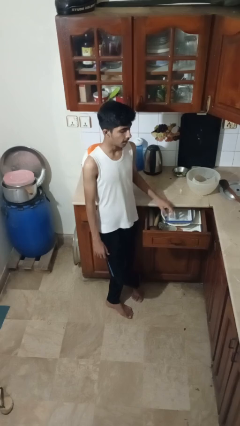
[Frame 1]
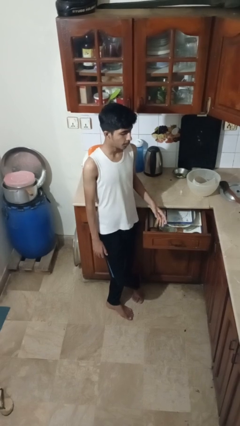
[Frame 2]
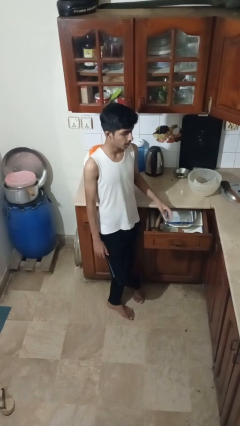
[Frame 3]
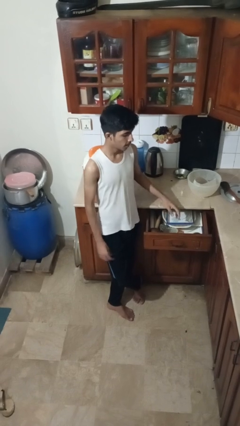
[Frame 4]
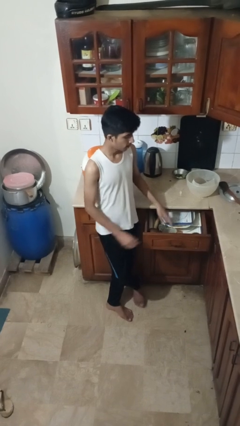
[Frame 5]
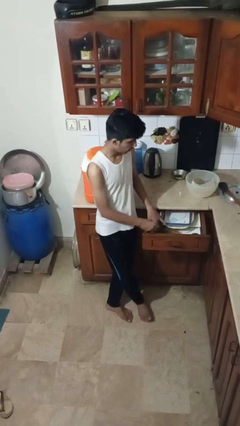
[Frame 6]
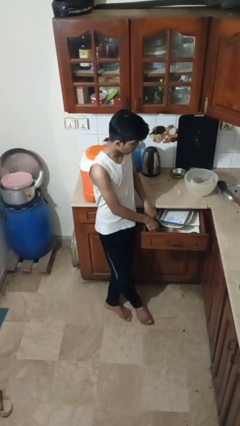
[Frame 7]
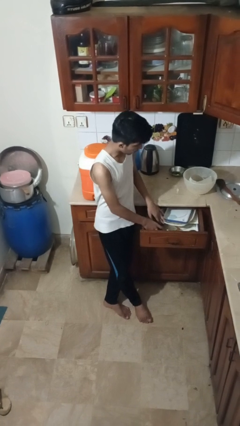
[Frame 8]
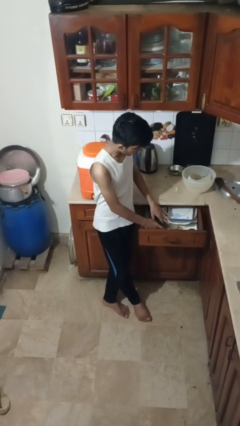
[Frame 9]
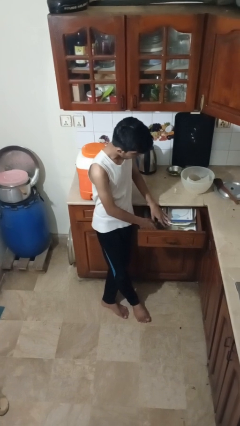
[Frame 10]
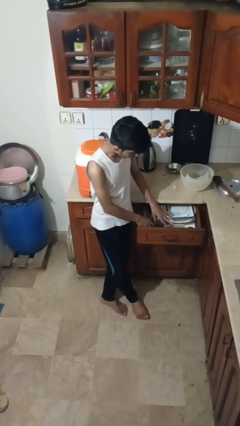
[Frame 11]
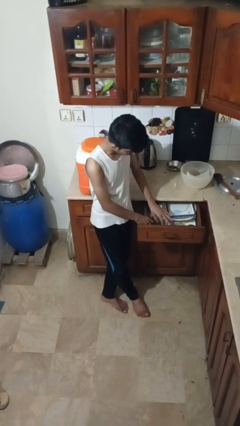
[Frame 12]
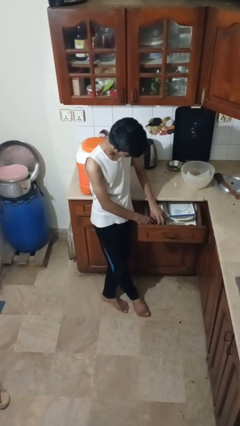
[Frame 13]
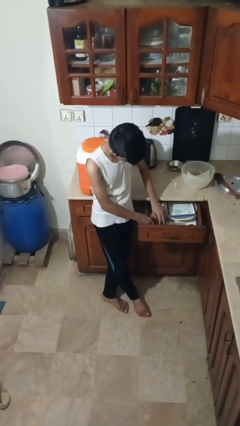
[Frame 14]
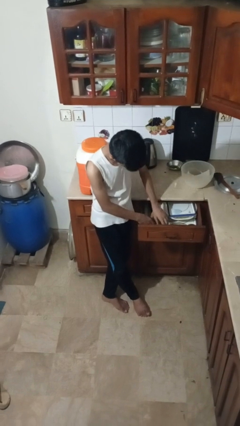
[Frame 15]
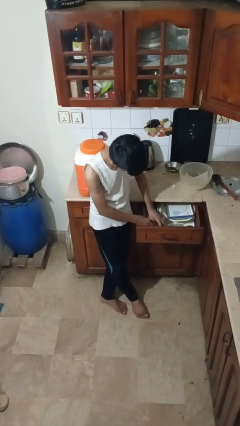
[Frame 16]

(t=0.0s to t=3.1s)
person searches in kitchen drawer

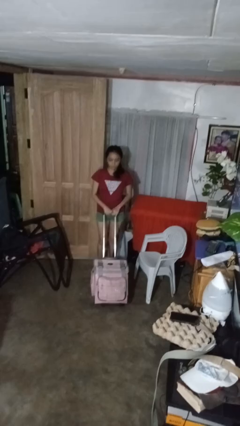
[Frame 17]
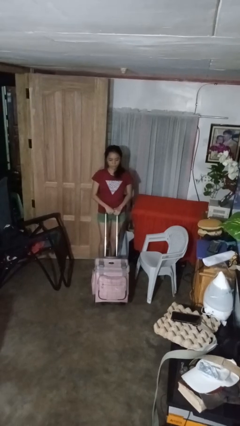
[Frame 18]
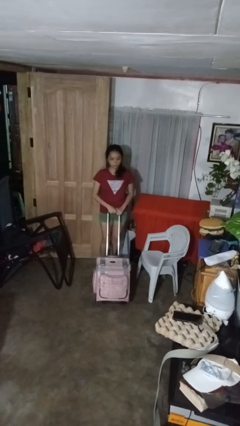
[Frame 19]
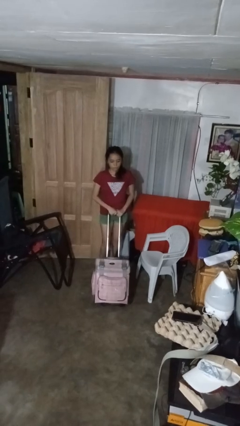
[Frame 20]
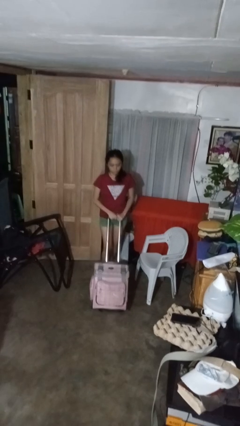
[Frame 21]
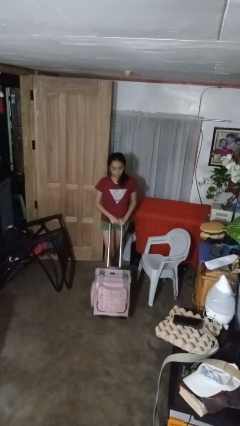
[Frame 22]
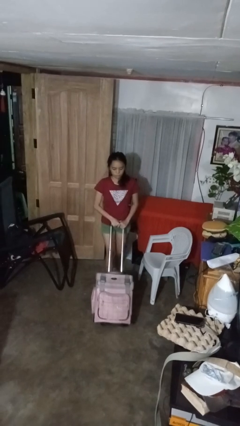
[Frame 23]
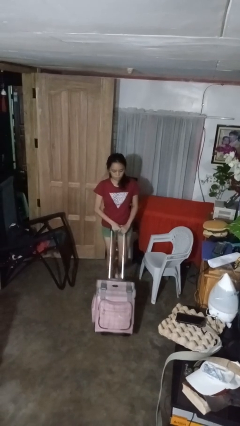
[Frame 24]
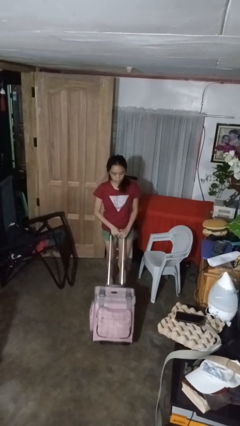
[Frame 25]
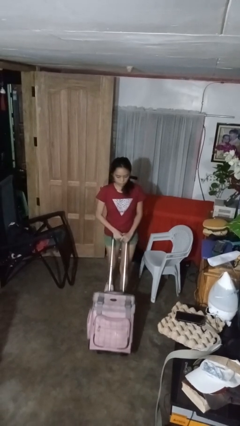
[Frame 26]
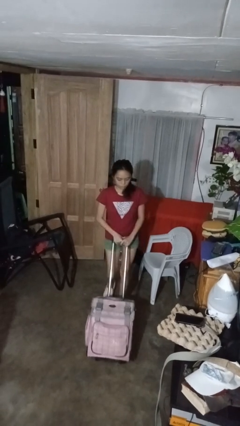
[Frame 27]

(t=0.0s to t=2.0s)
person pushes wheeled cart

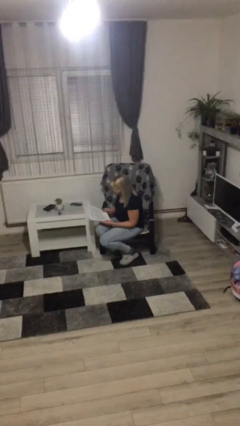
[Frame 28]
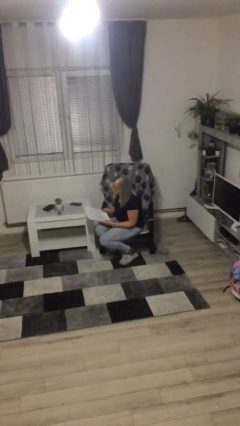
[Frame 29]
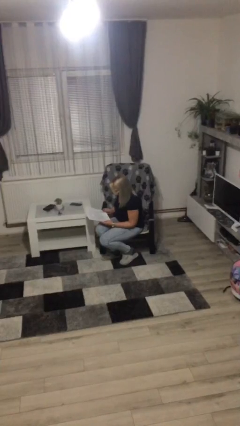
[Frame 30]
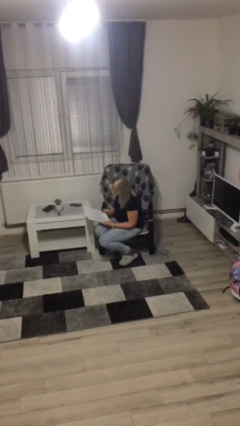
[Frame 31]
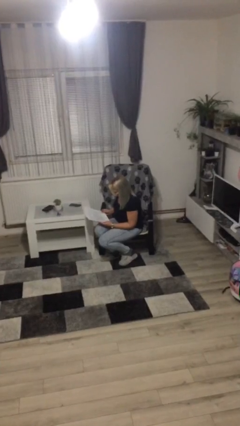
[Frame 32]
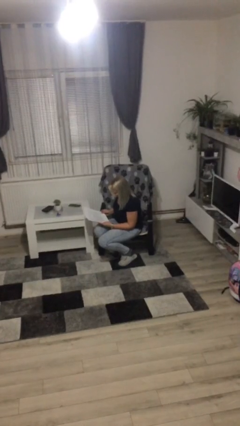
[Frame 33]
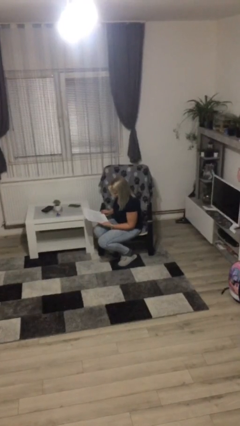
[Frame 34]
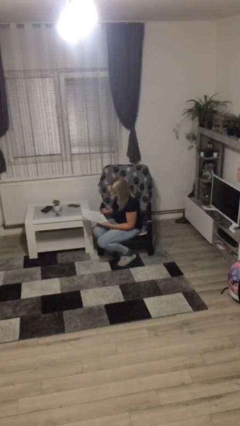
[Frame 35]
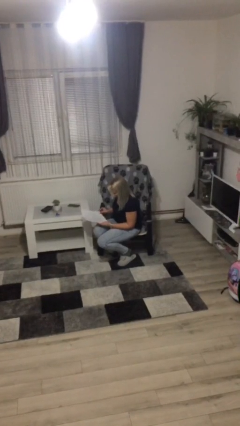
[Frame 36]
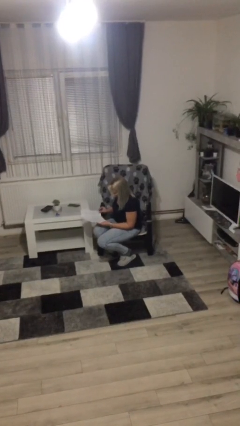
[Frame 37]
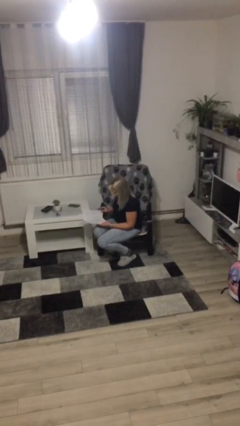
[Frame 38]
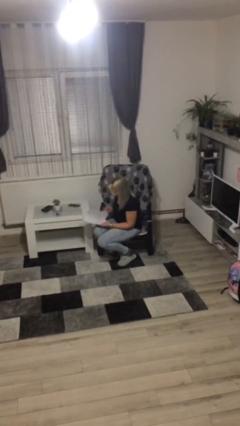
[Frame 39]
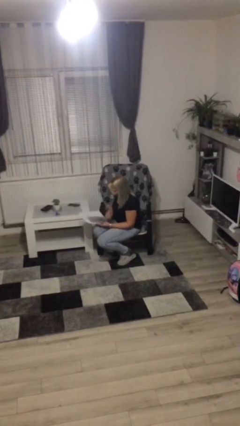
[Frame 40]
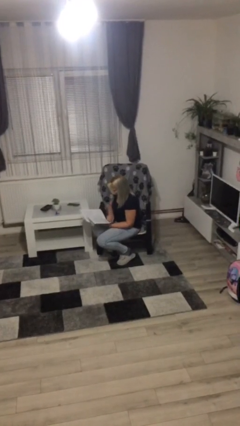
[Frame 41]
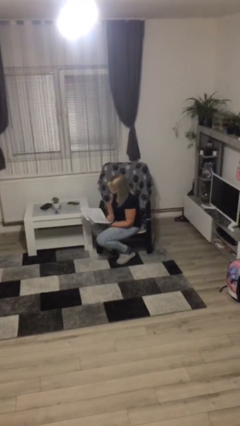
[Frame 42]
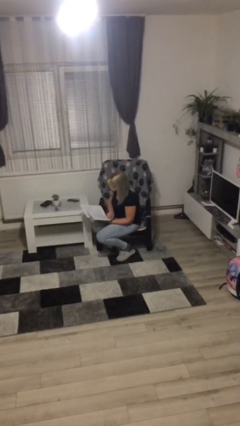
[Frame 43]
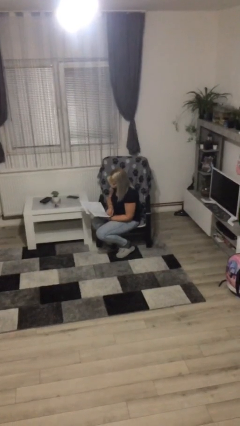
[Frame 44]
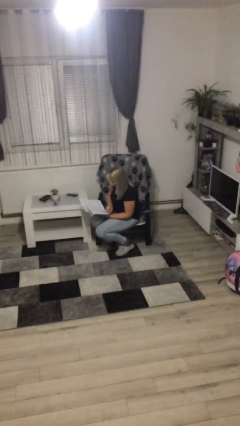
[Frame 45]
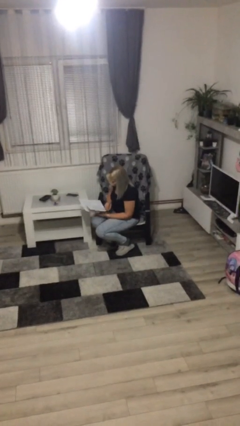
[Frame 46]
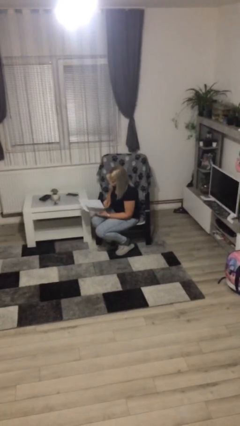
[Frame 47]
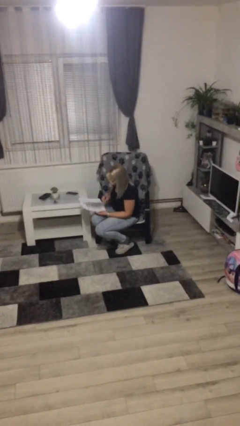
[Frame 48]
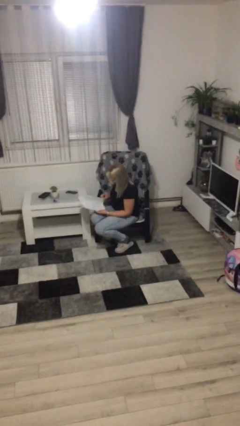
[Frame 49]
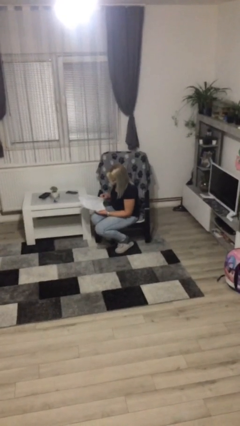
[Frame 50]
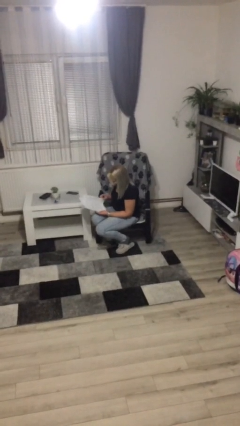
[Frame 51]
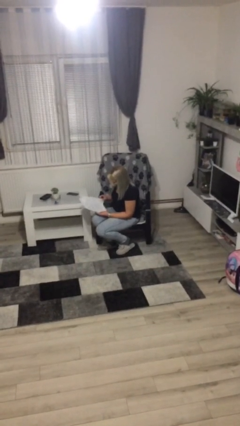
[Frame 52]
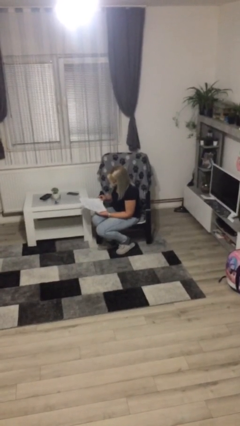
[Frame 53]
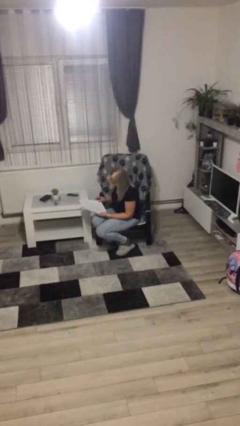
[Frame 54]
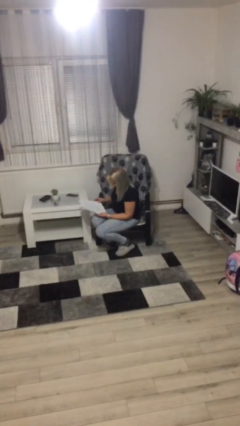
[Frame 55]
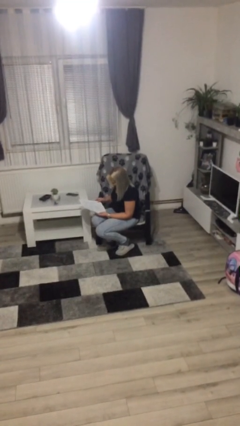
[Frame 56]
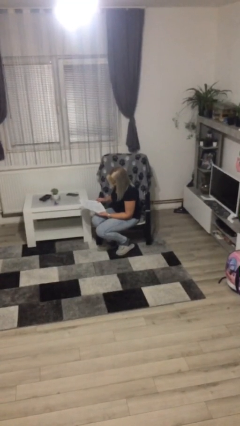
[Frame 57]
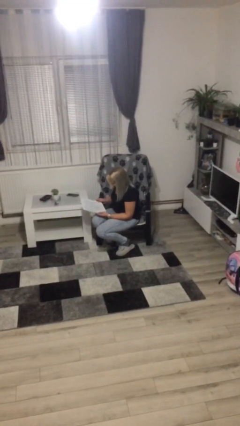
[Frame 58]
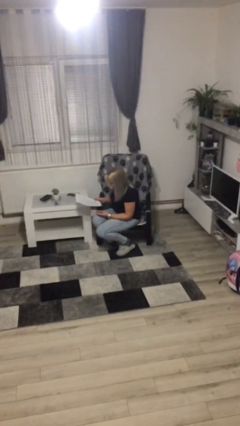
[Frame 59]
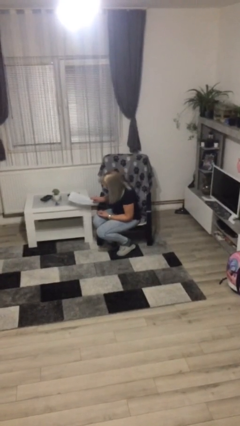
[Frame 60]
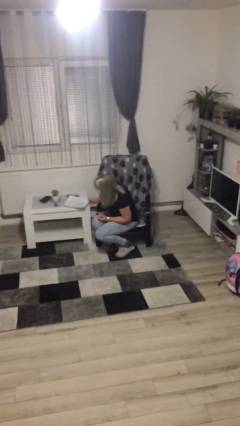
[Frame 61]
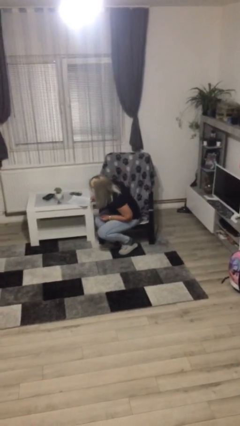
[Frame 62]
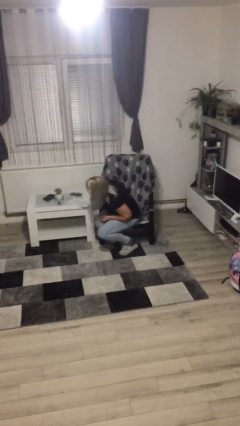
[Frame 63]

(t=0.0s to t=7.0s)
person reads document

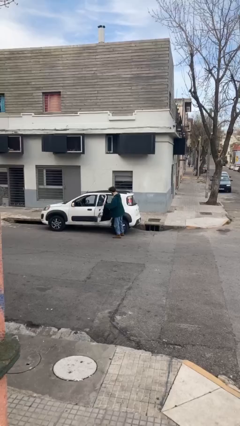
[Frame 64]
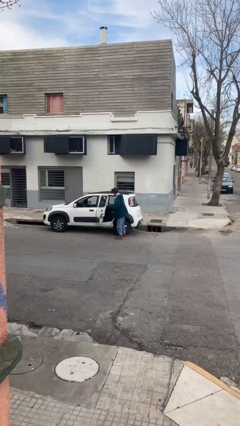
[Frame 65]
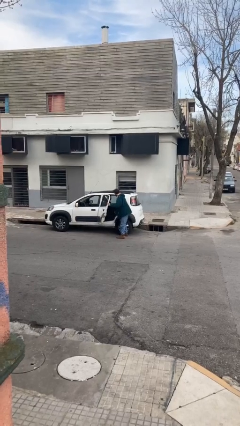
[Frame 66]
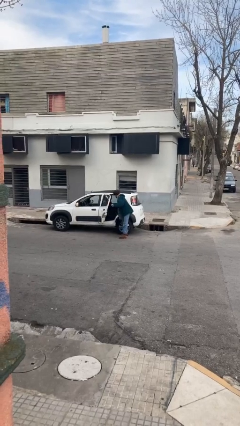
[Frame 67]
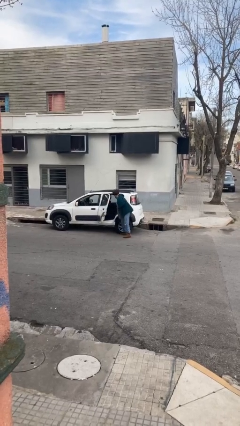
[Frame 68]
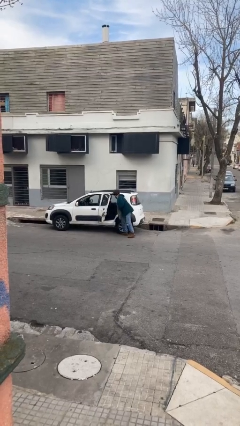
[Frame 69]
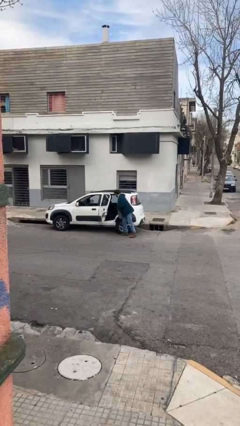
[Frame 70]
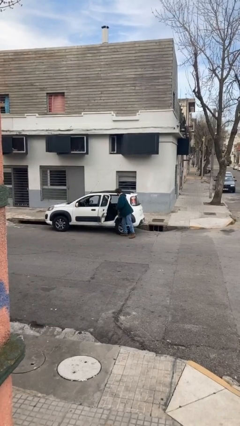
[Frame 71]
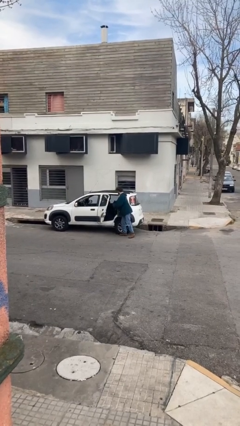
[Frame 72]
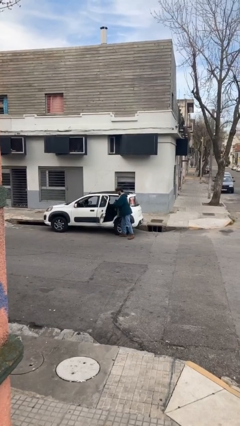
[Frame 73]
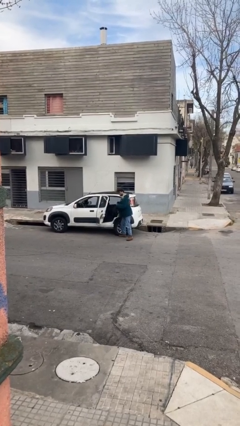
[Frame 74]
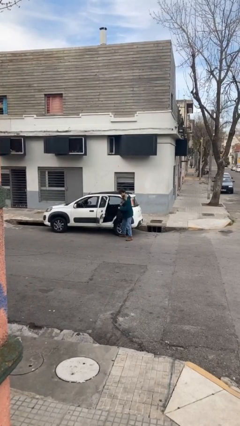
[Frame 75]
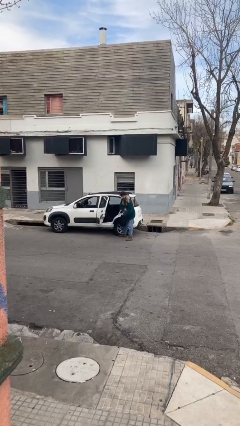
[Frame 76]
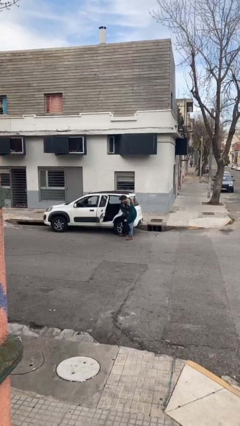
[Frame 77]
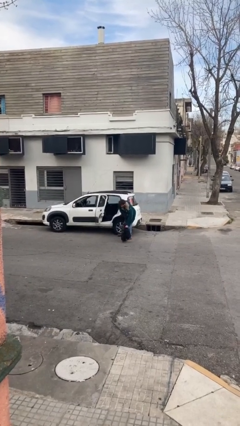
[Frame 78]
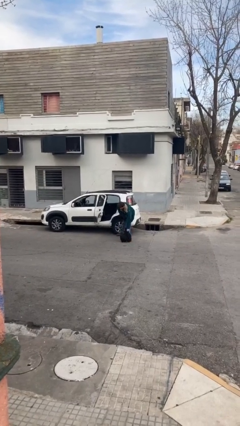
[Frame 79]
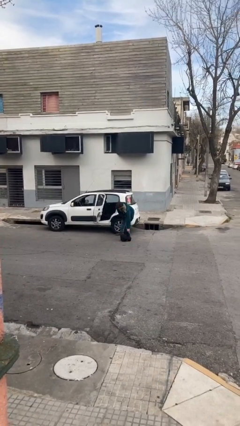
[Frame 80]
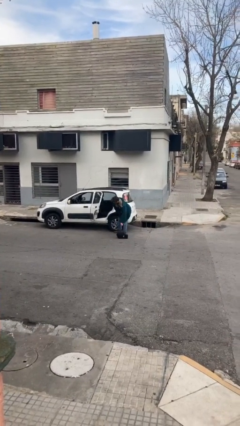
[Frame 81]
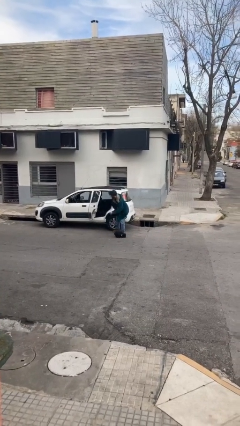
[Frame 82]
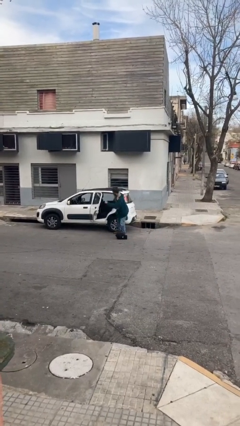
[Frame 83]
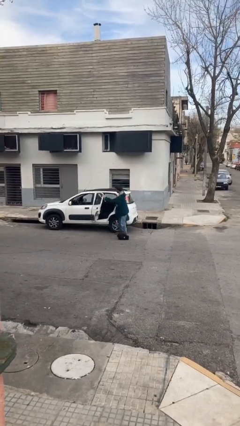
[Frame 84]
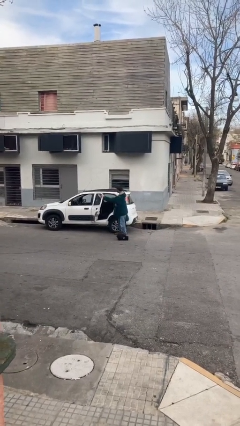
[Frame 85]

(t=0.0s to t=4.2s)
person unloads car

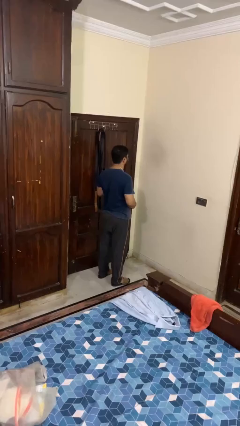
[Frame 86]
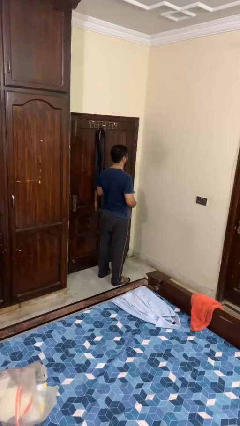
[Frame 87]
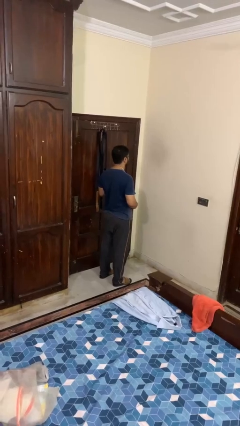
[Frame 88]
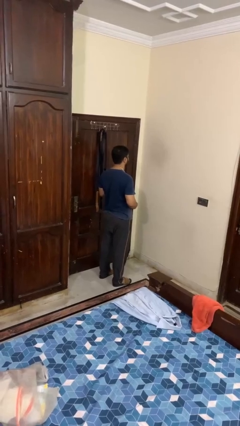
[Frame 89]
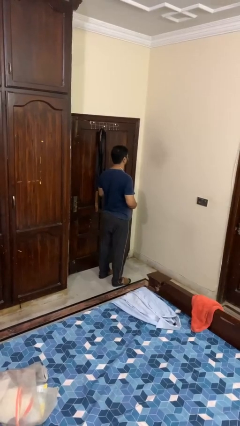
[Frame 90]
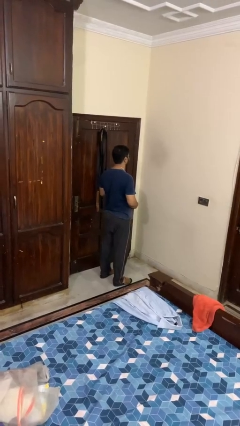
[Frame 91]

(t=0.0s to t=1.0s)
person puts on necklace
